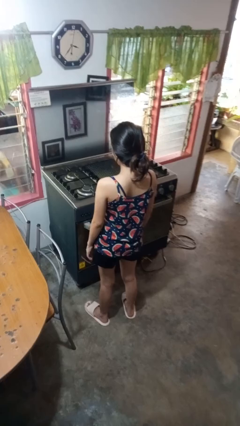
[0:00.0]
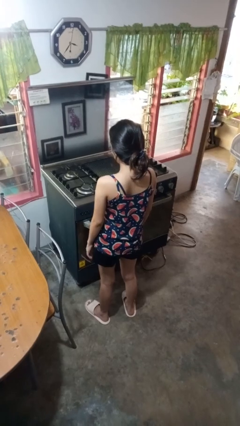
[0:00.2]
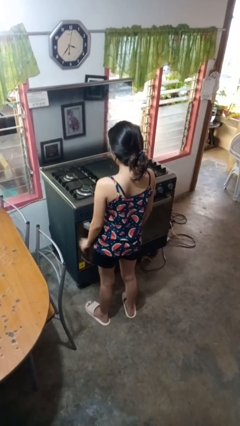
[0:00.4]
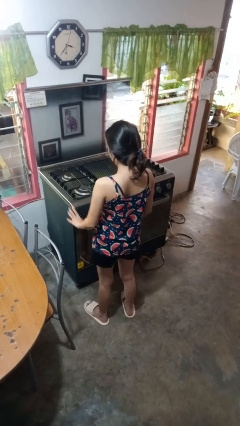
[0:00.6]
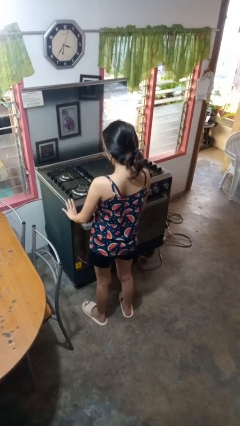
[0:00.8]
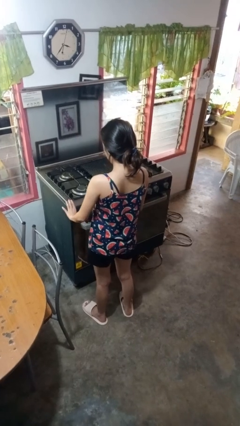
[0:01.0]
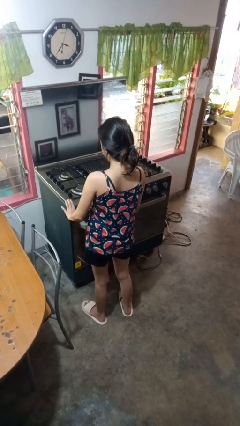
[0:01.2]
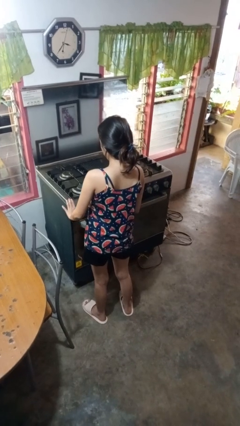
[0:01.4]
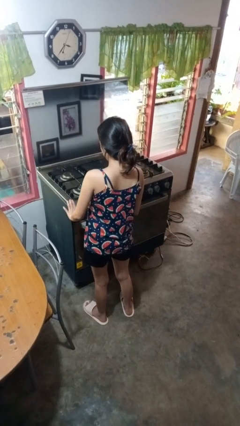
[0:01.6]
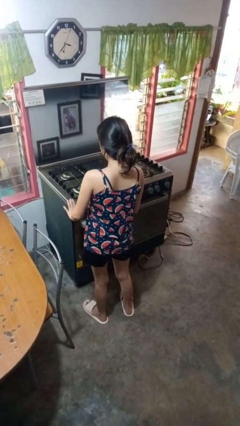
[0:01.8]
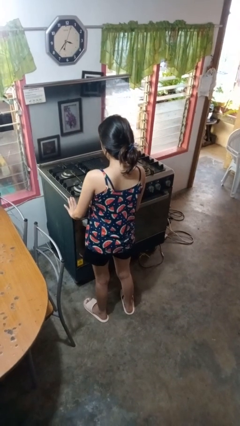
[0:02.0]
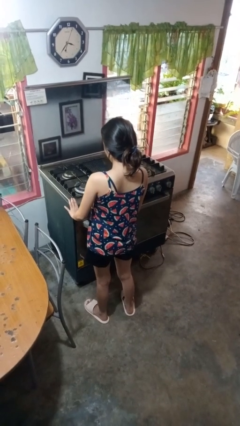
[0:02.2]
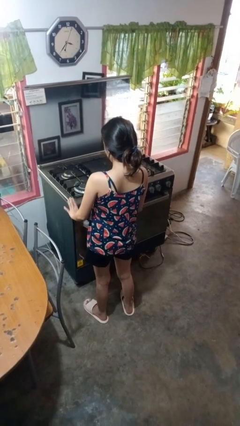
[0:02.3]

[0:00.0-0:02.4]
person turns on stovetop

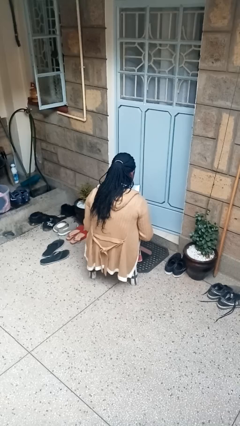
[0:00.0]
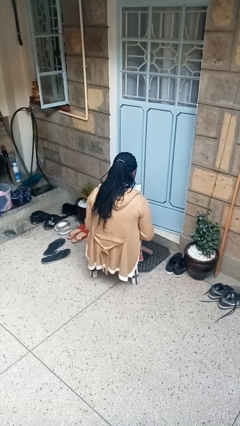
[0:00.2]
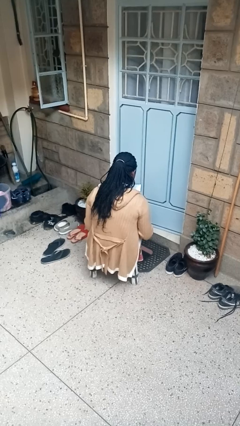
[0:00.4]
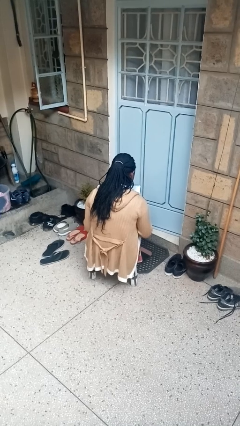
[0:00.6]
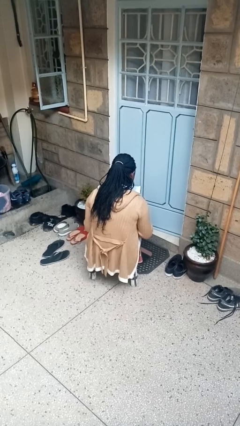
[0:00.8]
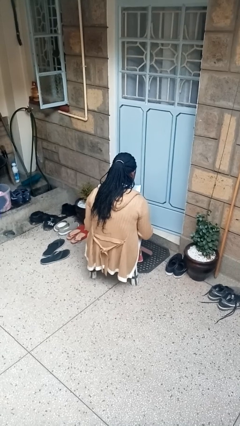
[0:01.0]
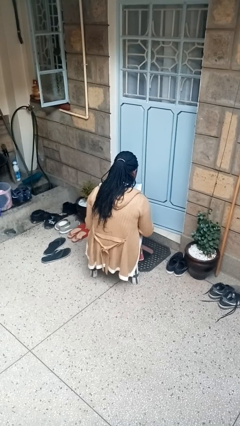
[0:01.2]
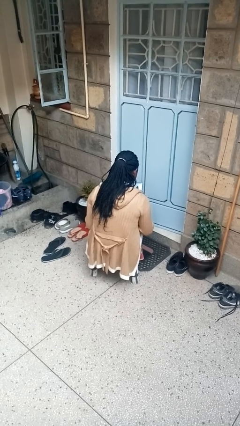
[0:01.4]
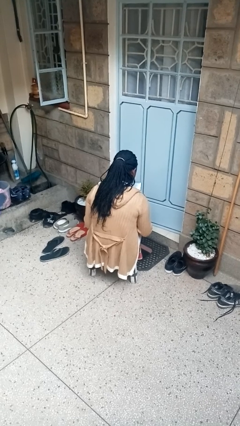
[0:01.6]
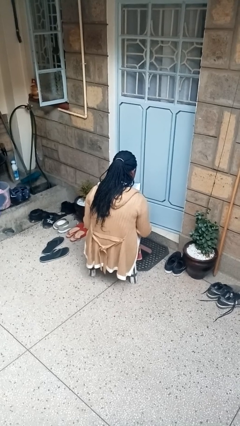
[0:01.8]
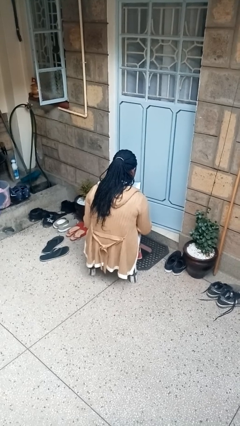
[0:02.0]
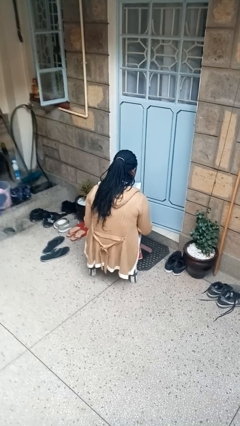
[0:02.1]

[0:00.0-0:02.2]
person interacts with tablet

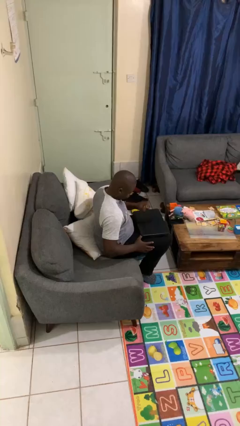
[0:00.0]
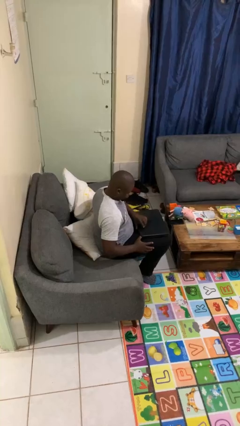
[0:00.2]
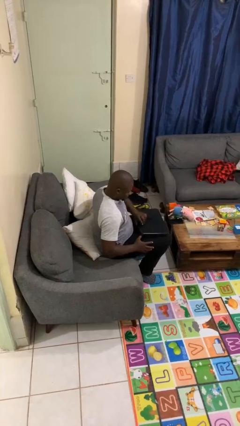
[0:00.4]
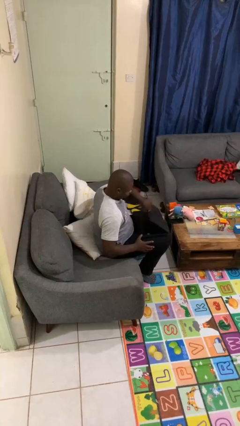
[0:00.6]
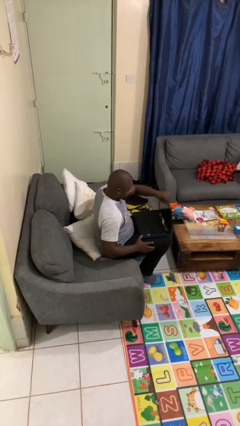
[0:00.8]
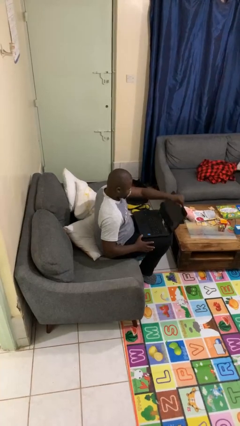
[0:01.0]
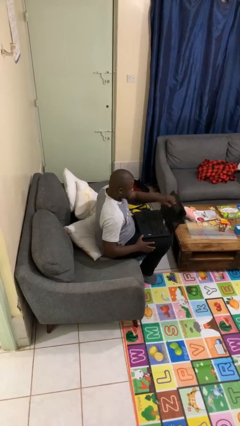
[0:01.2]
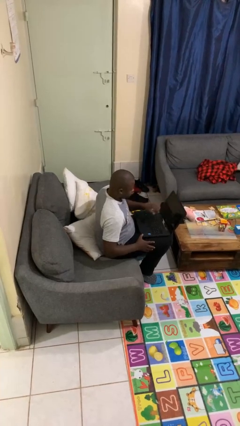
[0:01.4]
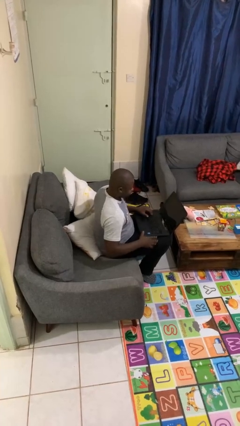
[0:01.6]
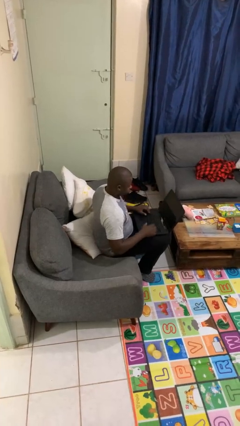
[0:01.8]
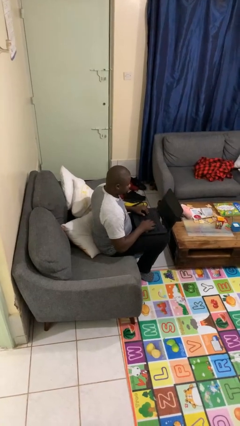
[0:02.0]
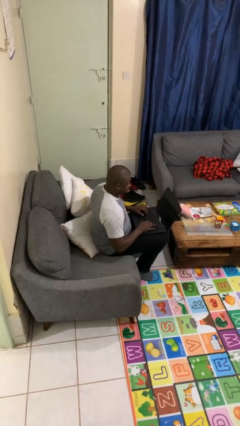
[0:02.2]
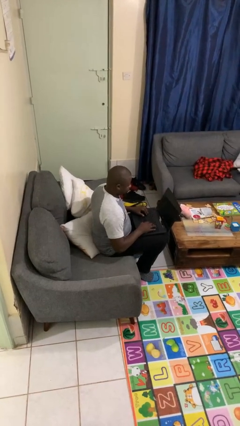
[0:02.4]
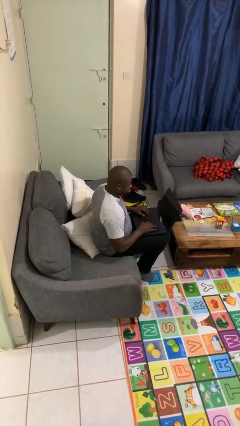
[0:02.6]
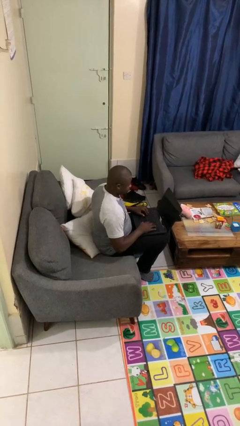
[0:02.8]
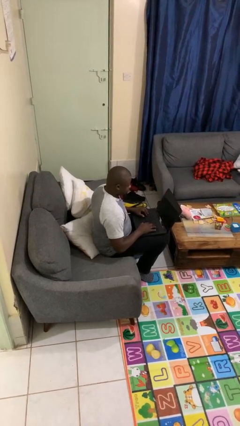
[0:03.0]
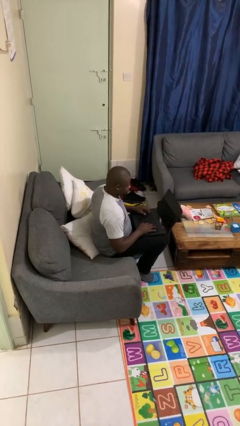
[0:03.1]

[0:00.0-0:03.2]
person opens laptop

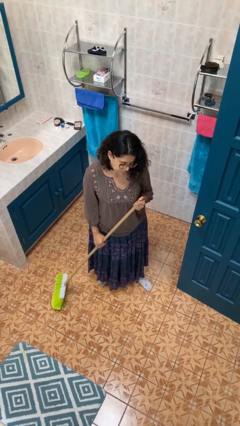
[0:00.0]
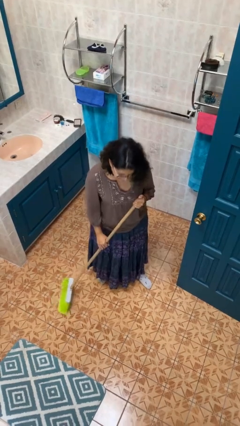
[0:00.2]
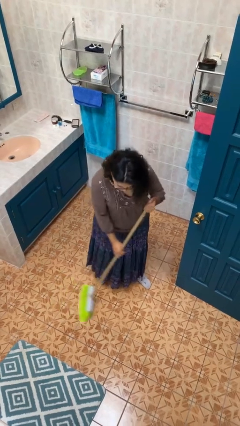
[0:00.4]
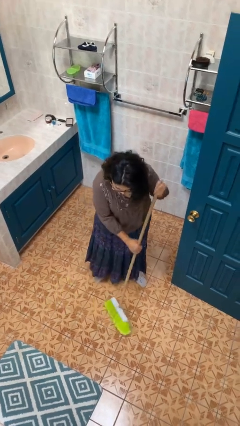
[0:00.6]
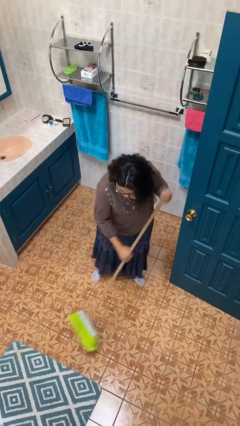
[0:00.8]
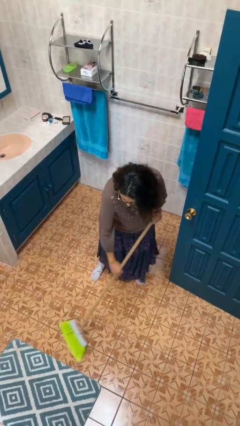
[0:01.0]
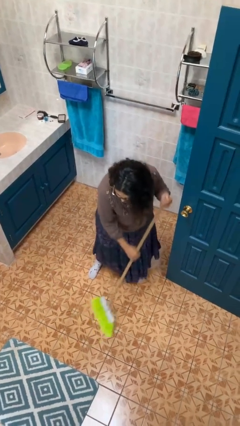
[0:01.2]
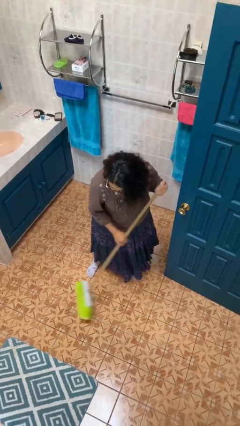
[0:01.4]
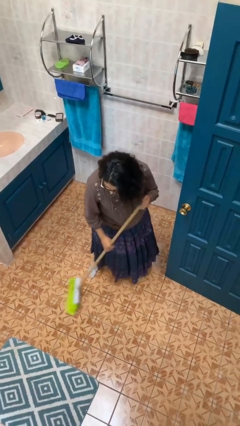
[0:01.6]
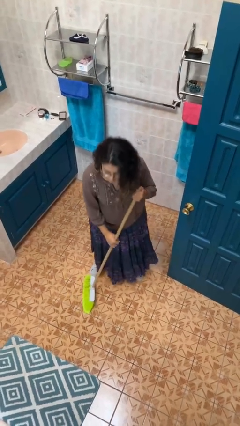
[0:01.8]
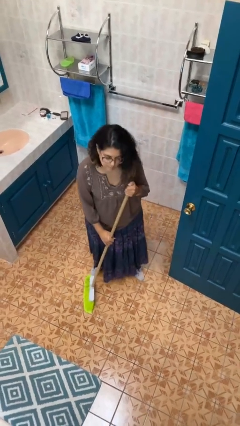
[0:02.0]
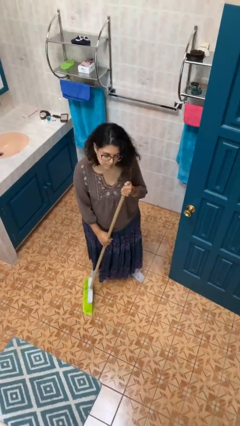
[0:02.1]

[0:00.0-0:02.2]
person sweeps floor

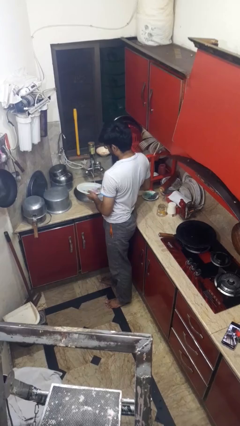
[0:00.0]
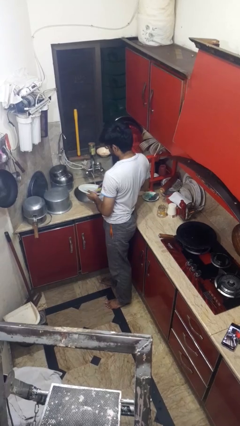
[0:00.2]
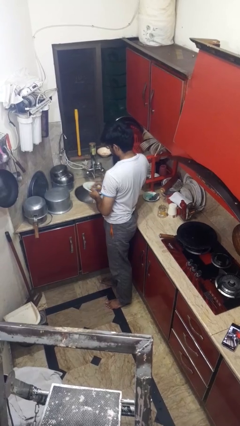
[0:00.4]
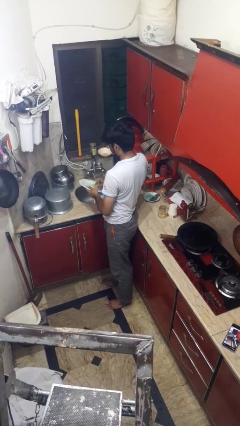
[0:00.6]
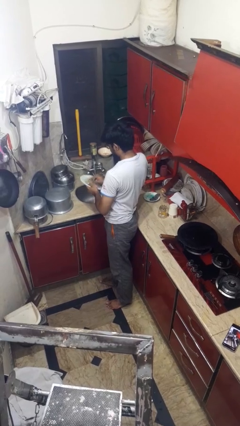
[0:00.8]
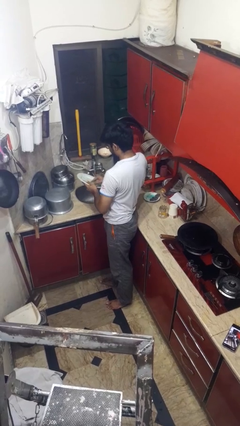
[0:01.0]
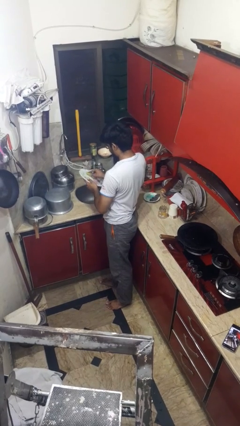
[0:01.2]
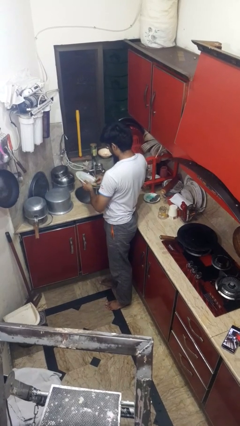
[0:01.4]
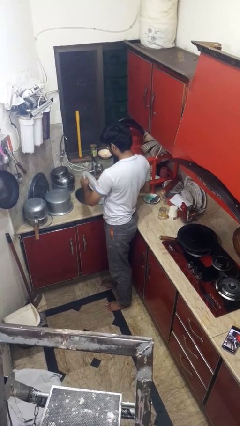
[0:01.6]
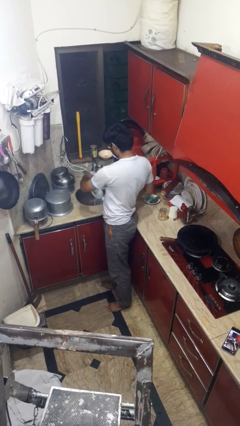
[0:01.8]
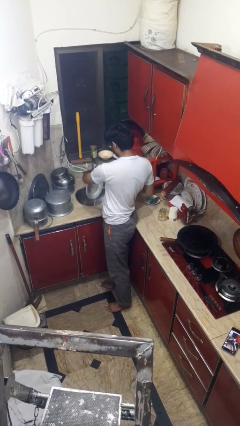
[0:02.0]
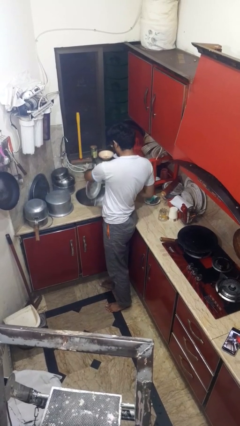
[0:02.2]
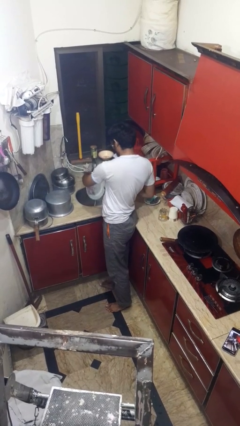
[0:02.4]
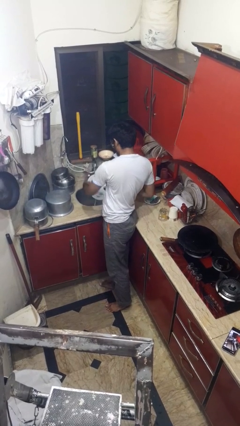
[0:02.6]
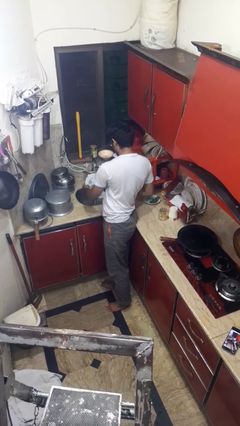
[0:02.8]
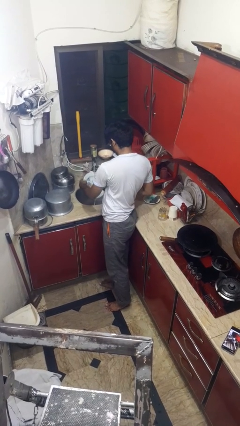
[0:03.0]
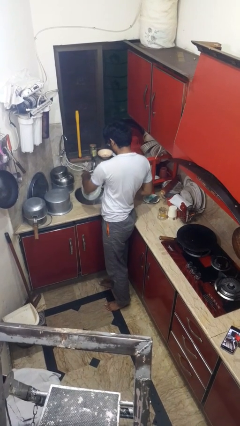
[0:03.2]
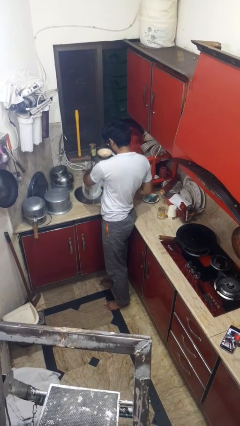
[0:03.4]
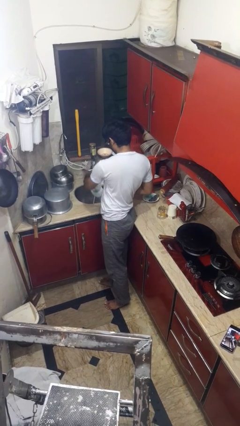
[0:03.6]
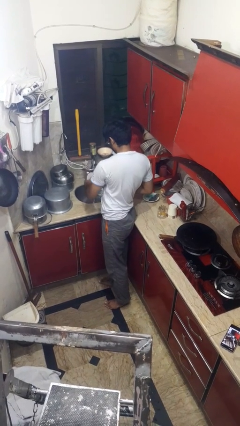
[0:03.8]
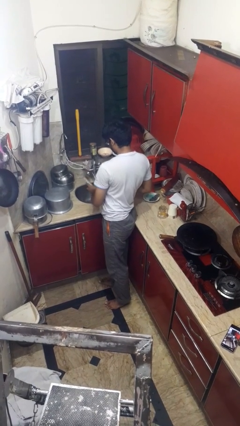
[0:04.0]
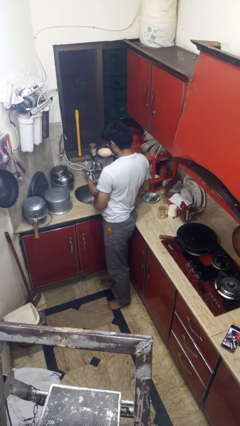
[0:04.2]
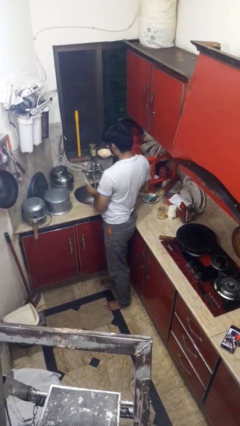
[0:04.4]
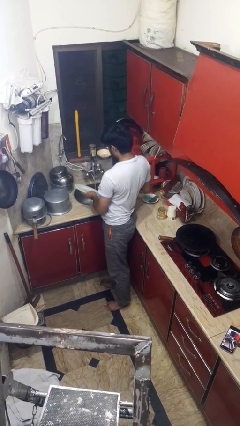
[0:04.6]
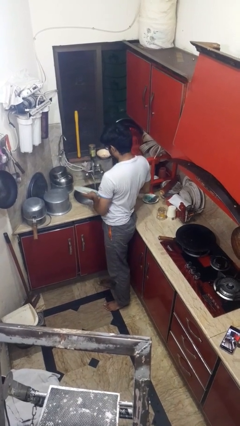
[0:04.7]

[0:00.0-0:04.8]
person washes dish

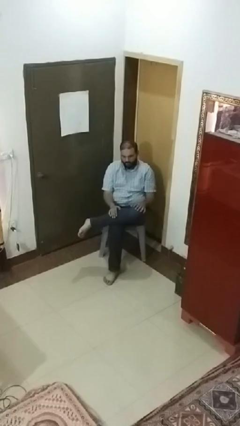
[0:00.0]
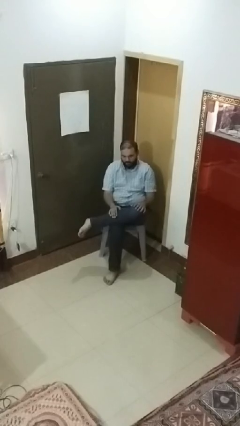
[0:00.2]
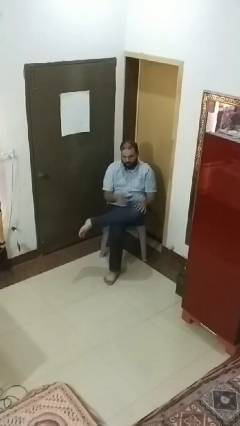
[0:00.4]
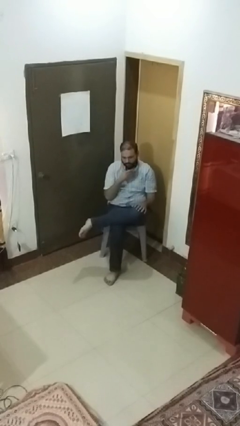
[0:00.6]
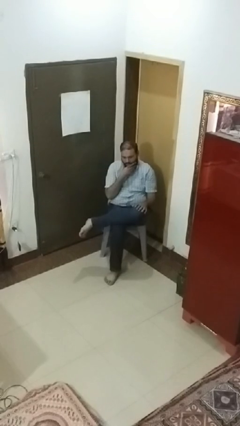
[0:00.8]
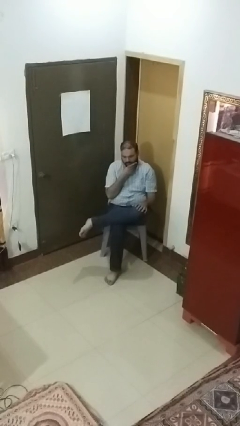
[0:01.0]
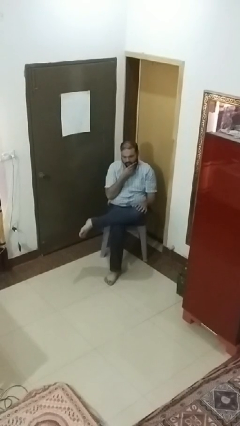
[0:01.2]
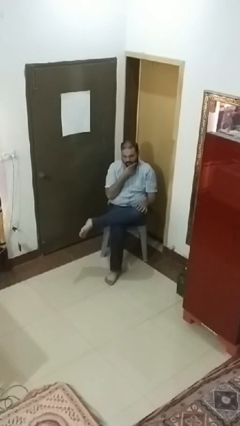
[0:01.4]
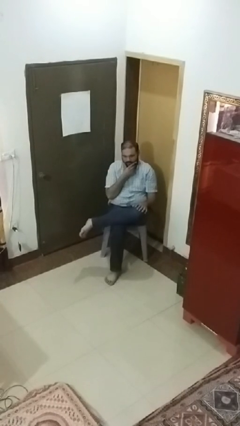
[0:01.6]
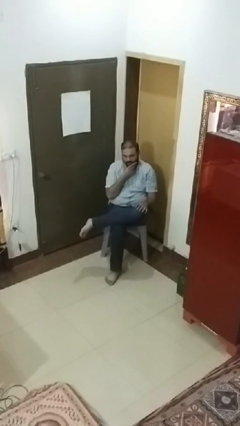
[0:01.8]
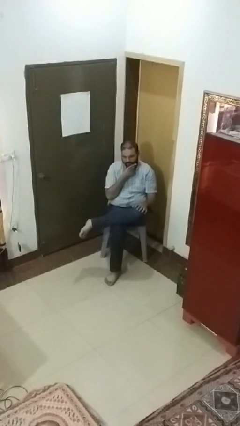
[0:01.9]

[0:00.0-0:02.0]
person strokes chin

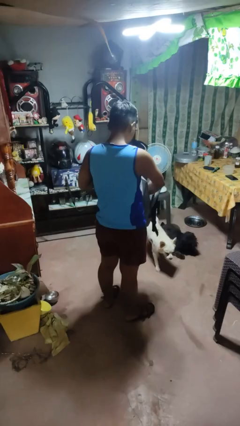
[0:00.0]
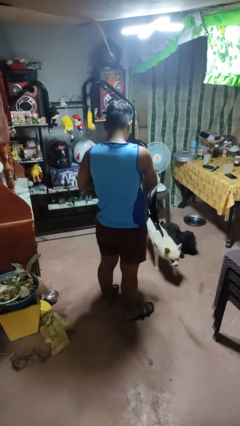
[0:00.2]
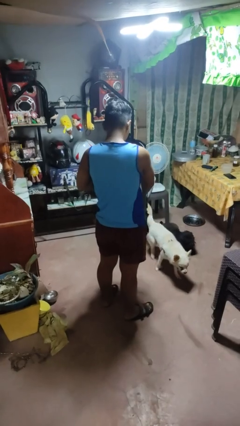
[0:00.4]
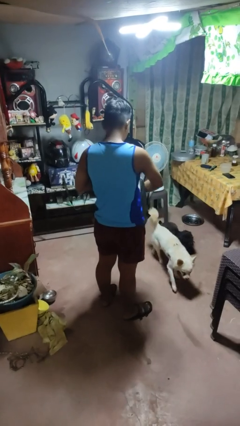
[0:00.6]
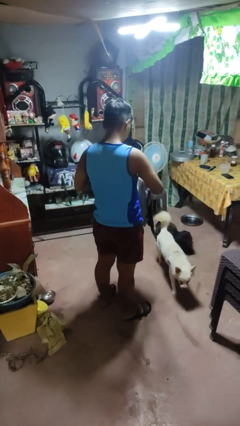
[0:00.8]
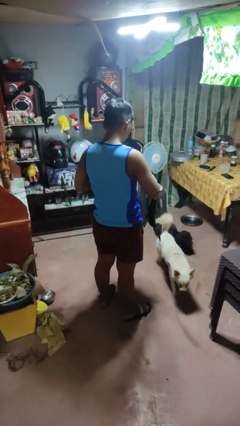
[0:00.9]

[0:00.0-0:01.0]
person takes object from bag
